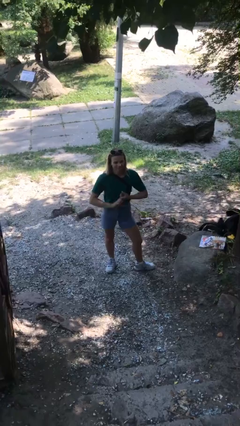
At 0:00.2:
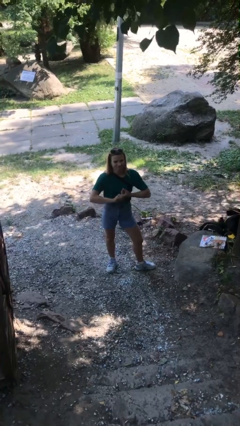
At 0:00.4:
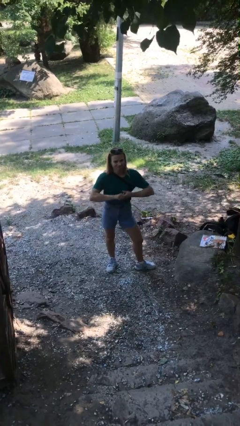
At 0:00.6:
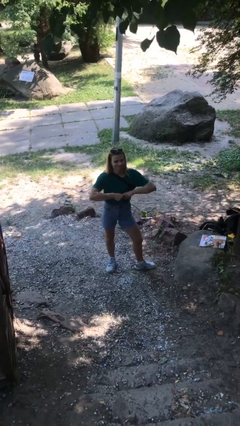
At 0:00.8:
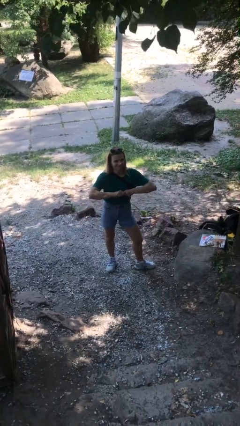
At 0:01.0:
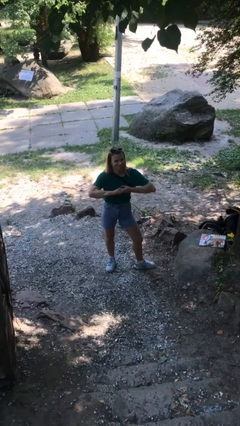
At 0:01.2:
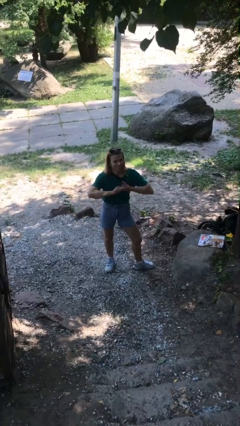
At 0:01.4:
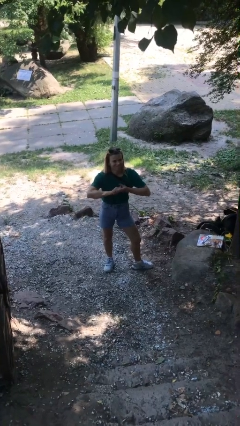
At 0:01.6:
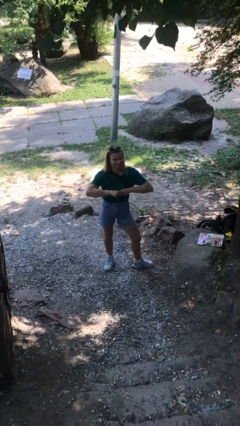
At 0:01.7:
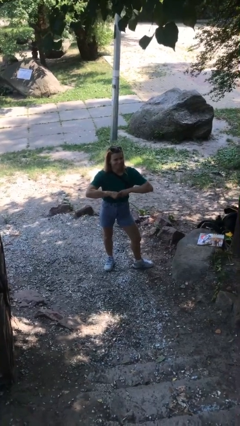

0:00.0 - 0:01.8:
person cracks knuckles

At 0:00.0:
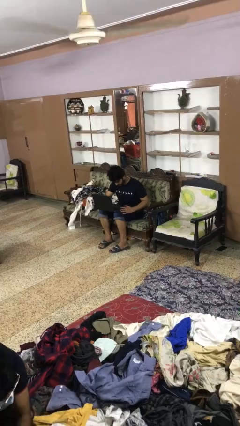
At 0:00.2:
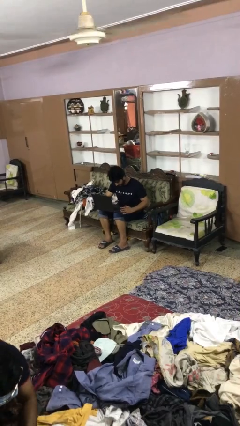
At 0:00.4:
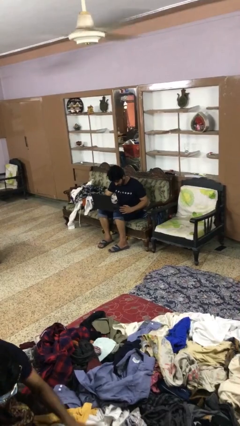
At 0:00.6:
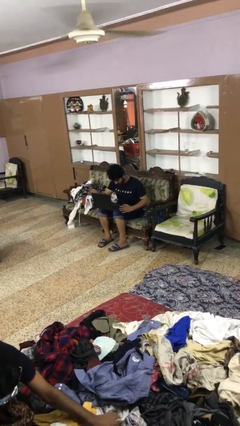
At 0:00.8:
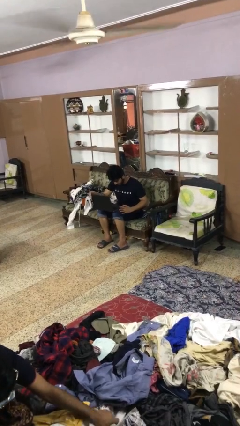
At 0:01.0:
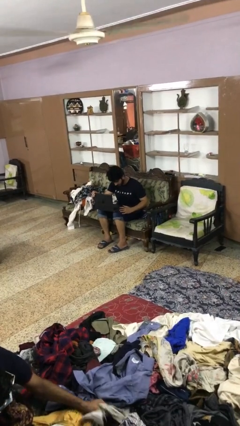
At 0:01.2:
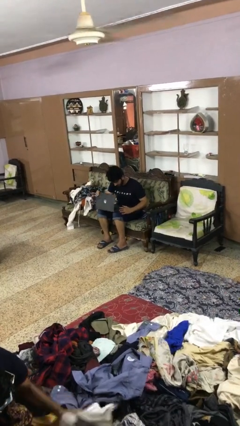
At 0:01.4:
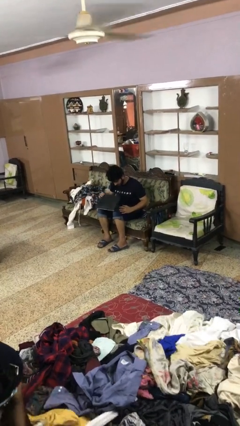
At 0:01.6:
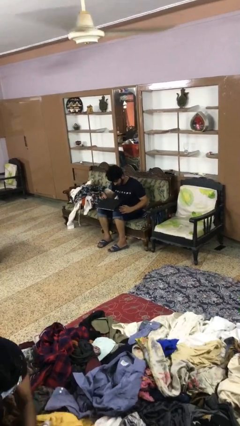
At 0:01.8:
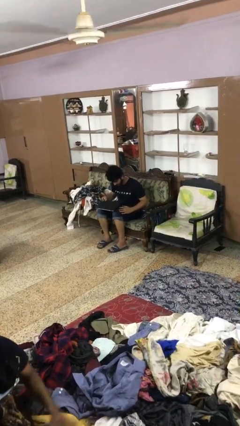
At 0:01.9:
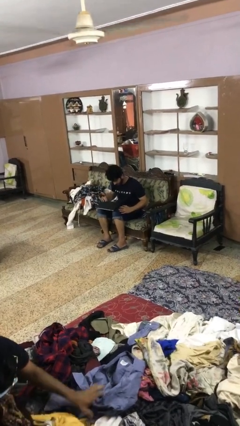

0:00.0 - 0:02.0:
person closes laptop

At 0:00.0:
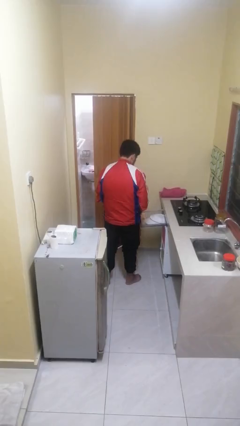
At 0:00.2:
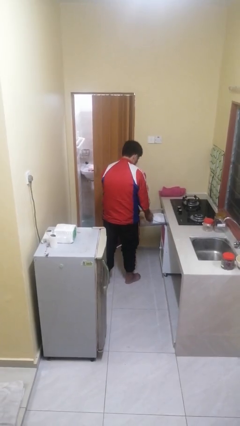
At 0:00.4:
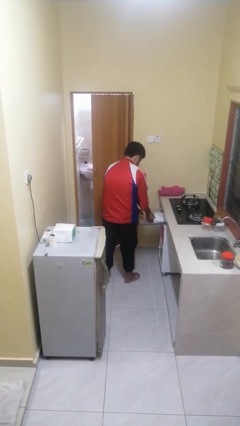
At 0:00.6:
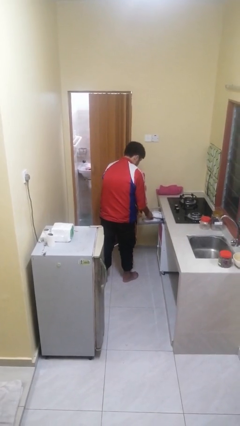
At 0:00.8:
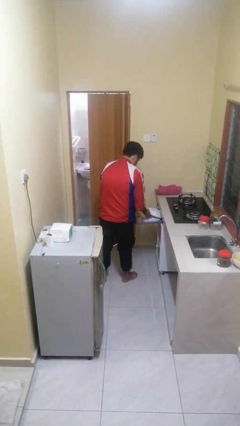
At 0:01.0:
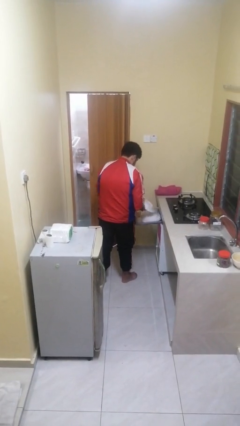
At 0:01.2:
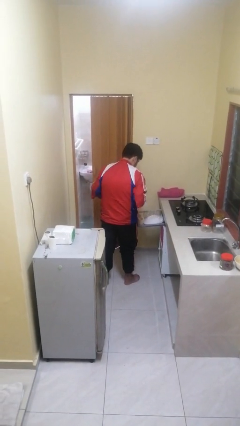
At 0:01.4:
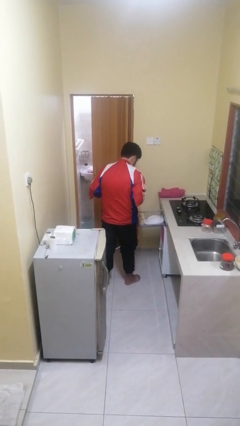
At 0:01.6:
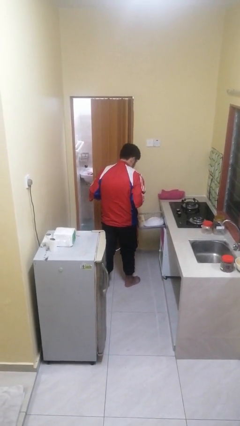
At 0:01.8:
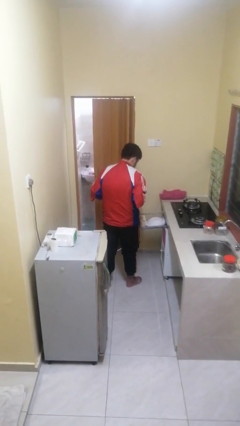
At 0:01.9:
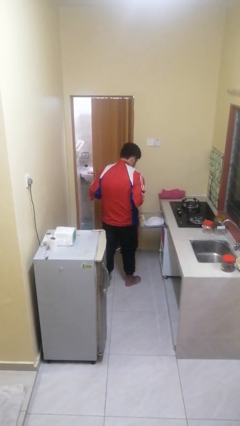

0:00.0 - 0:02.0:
person takes object from kitchen drawer

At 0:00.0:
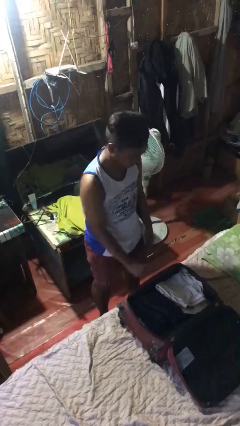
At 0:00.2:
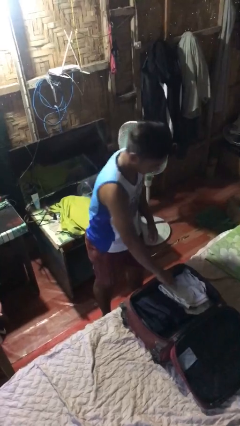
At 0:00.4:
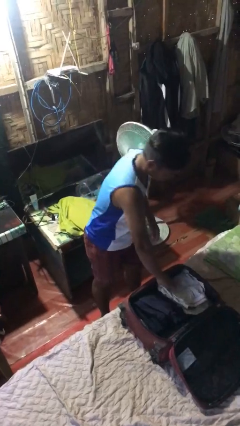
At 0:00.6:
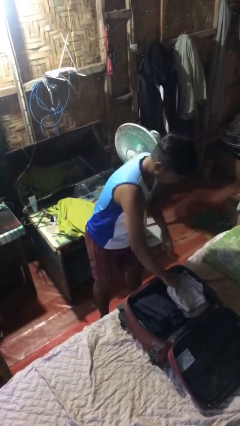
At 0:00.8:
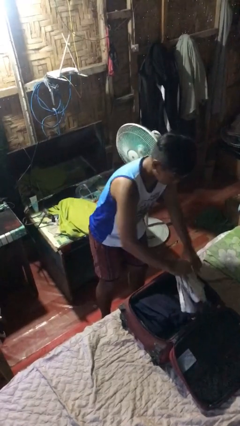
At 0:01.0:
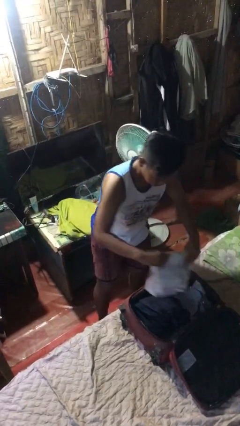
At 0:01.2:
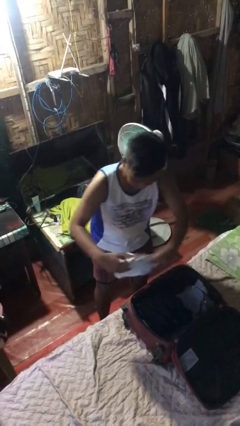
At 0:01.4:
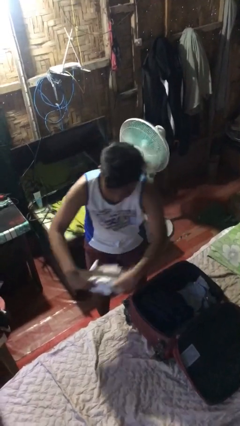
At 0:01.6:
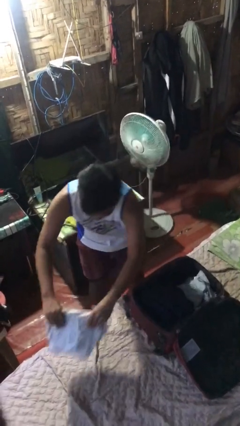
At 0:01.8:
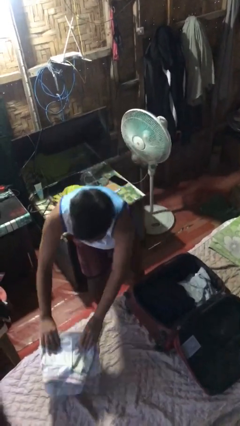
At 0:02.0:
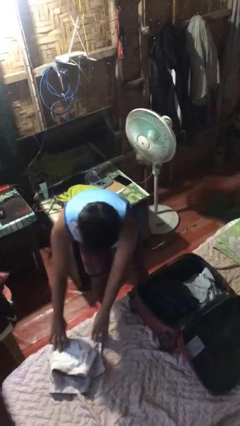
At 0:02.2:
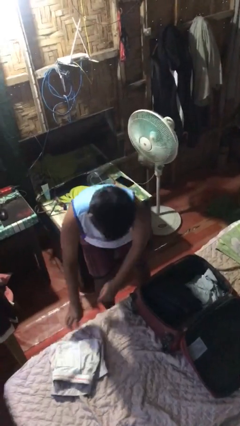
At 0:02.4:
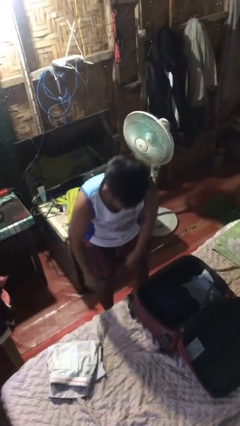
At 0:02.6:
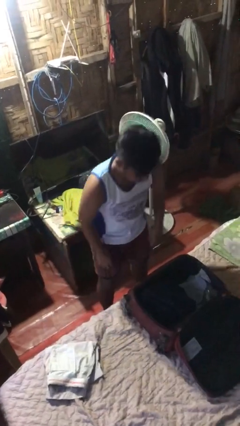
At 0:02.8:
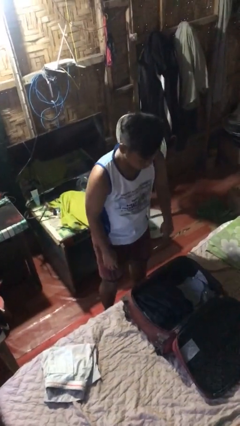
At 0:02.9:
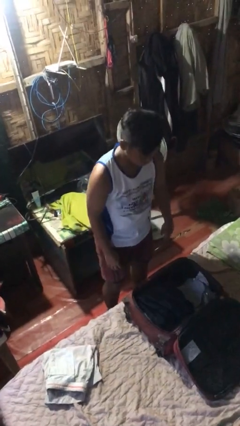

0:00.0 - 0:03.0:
person unloads clothes from suitcase

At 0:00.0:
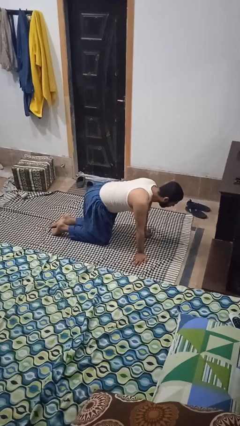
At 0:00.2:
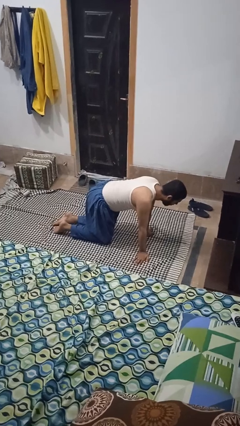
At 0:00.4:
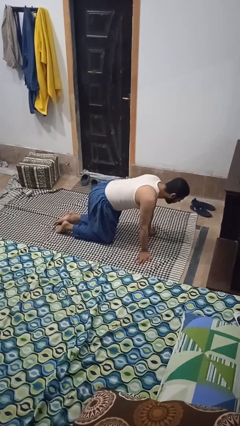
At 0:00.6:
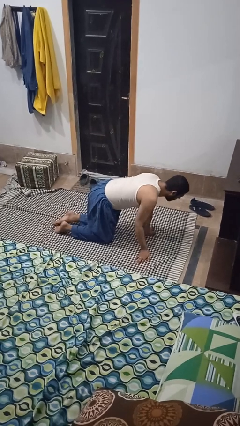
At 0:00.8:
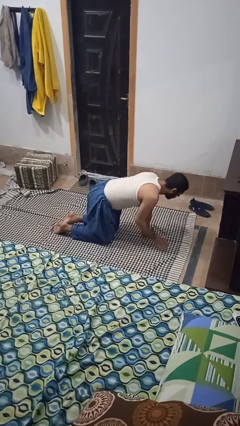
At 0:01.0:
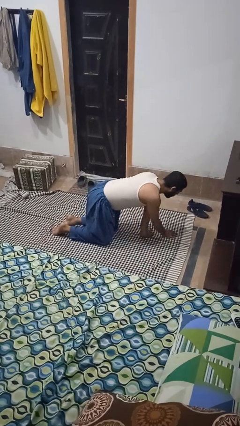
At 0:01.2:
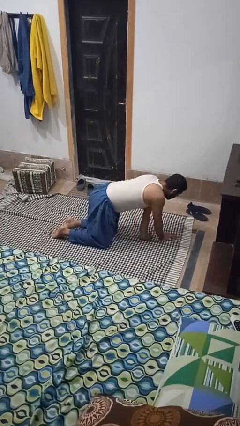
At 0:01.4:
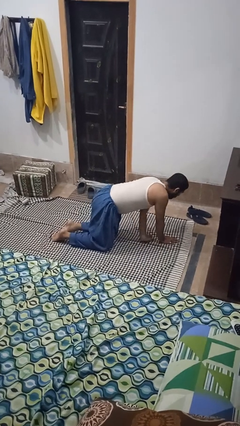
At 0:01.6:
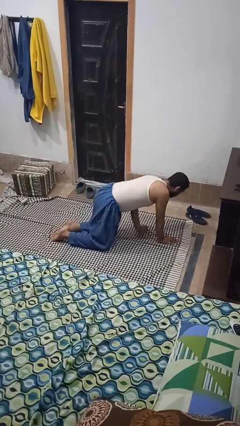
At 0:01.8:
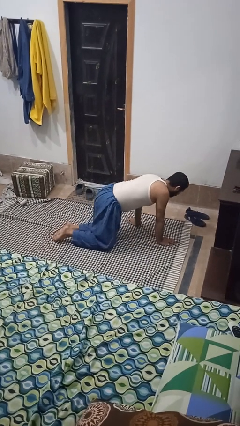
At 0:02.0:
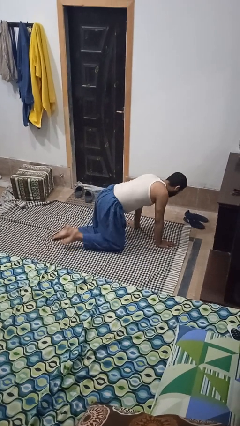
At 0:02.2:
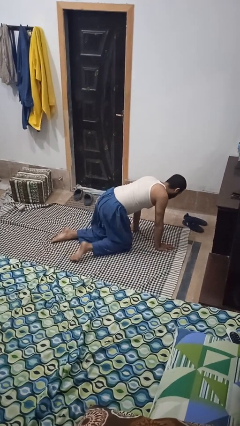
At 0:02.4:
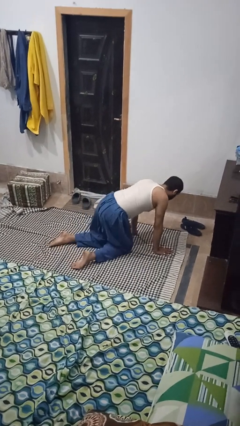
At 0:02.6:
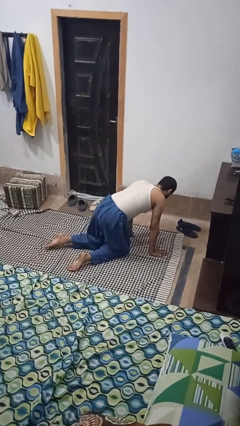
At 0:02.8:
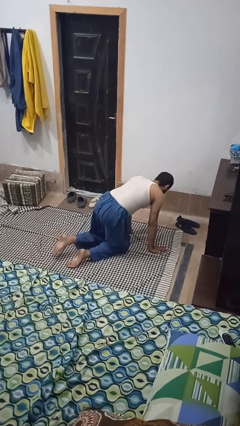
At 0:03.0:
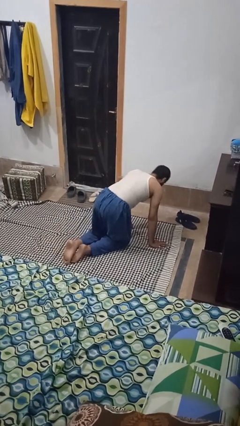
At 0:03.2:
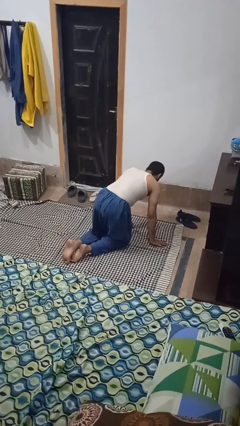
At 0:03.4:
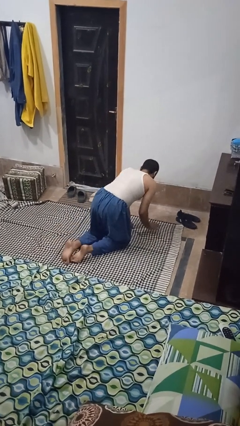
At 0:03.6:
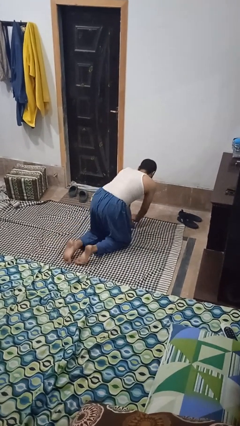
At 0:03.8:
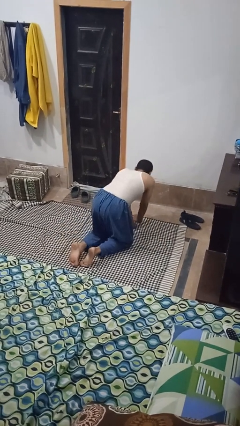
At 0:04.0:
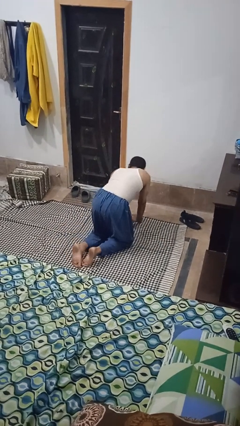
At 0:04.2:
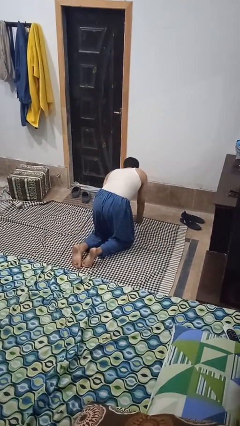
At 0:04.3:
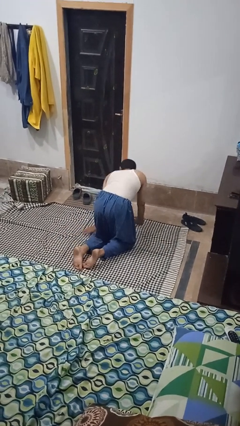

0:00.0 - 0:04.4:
person crawls

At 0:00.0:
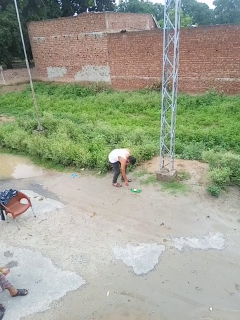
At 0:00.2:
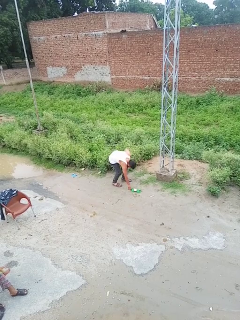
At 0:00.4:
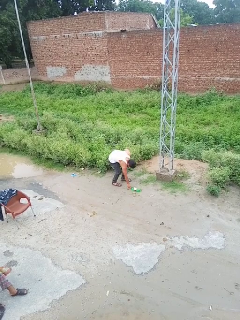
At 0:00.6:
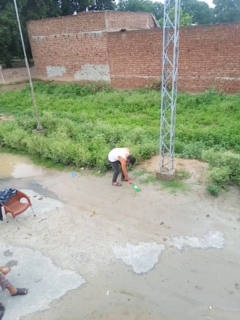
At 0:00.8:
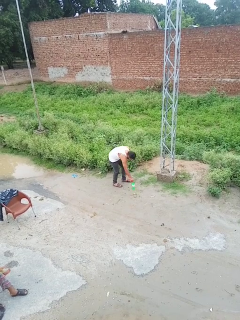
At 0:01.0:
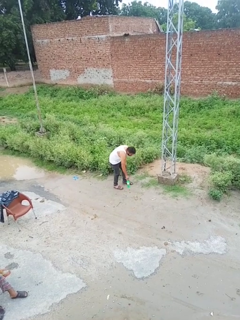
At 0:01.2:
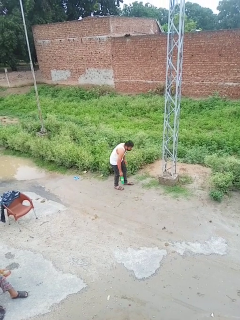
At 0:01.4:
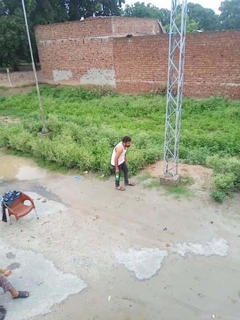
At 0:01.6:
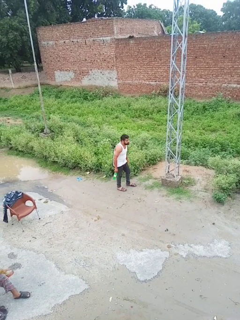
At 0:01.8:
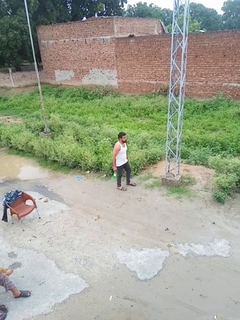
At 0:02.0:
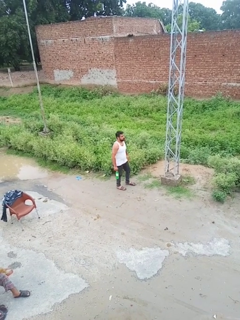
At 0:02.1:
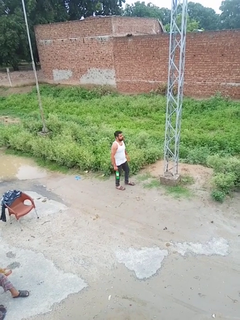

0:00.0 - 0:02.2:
person picks up object from floor

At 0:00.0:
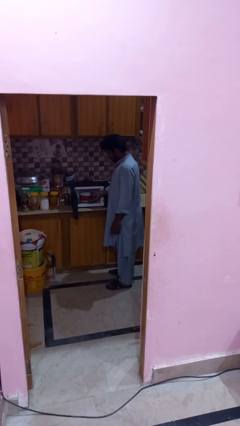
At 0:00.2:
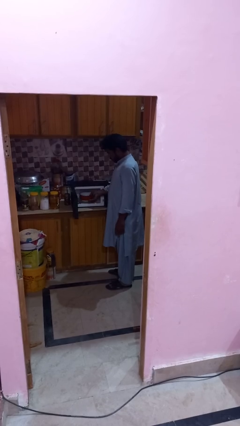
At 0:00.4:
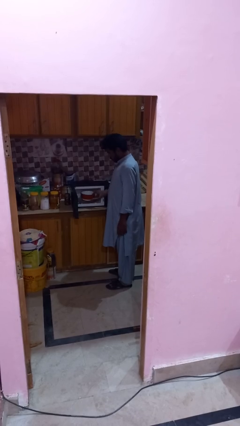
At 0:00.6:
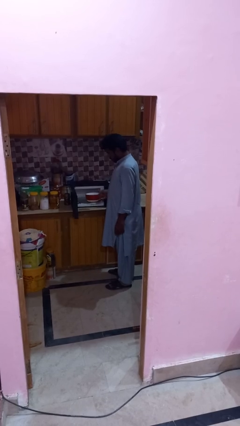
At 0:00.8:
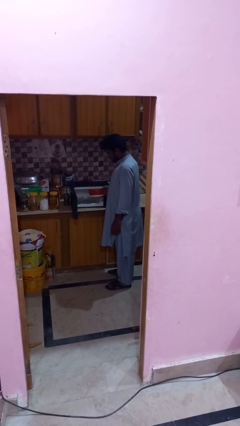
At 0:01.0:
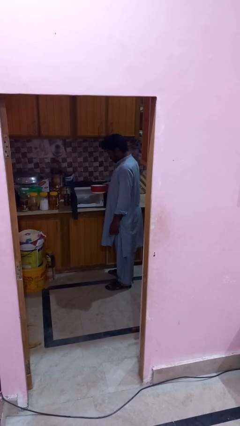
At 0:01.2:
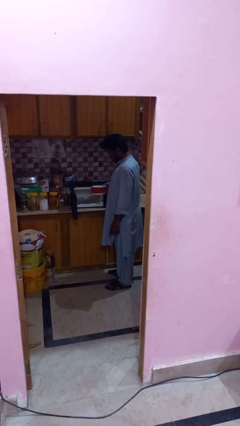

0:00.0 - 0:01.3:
person takes object from microwave

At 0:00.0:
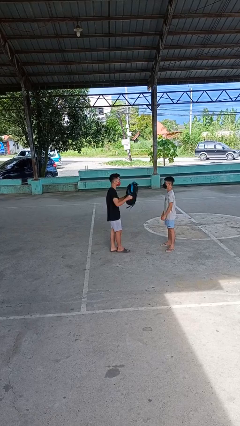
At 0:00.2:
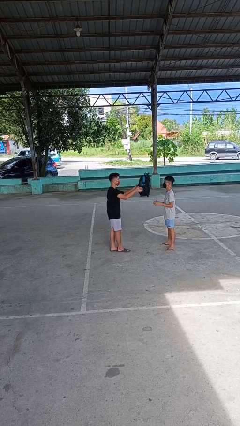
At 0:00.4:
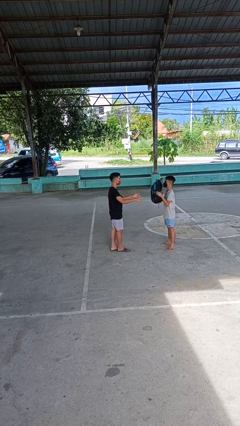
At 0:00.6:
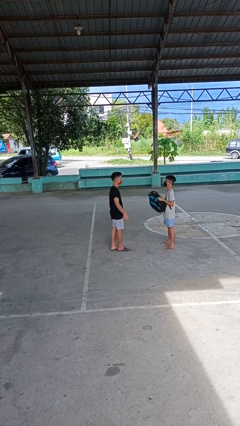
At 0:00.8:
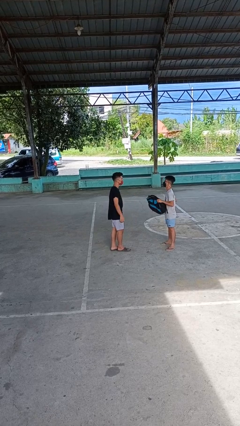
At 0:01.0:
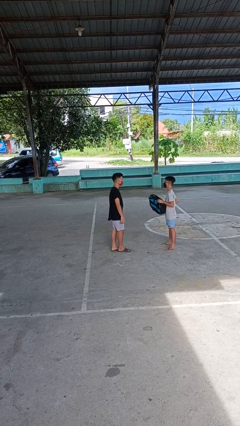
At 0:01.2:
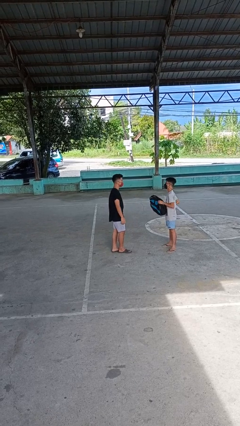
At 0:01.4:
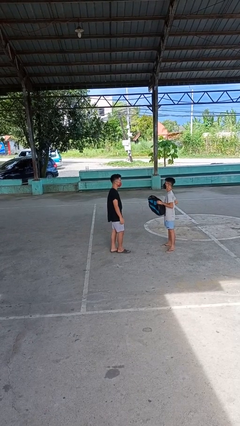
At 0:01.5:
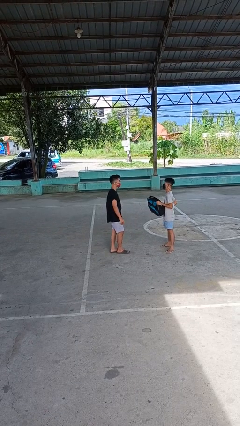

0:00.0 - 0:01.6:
person throws object to person
